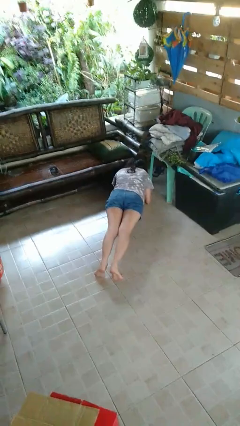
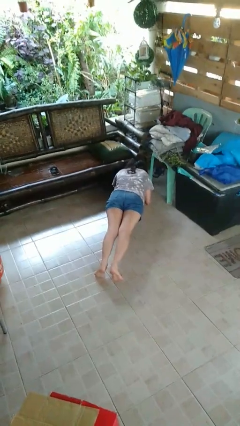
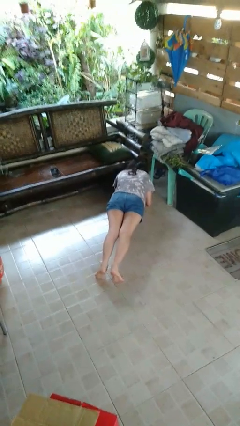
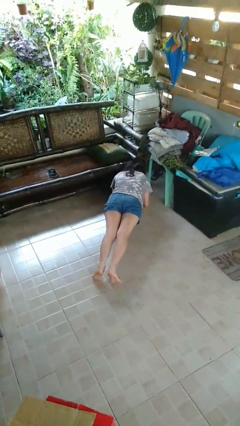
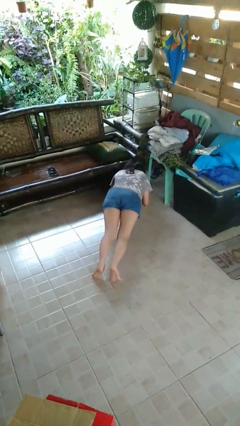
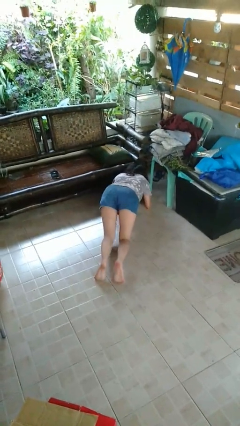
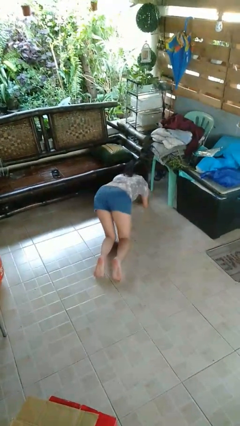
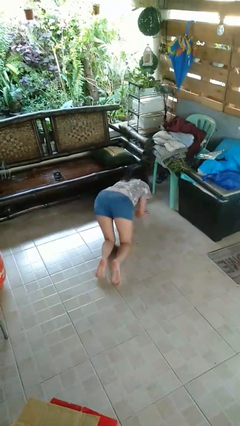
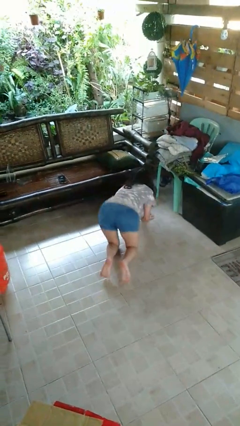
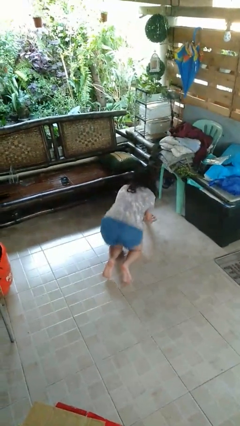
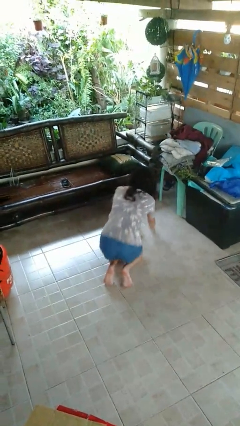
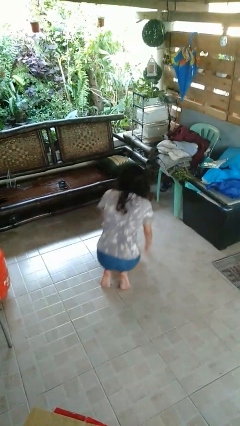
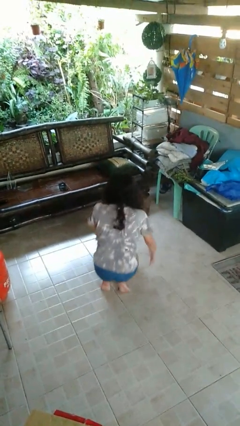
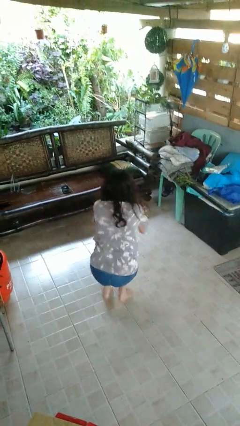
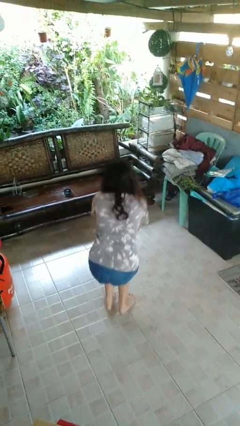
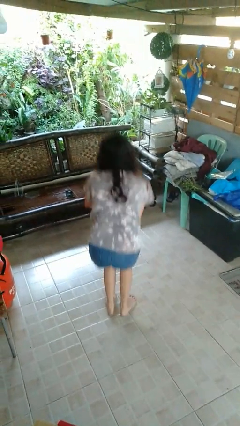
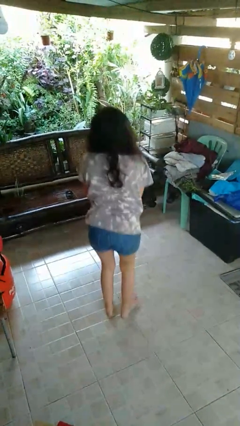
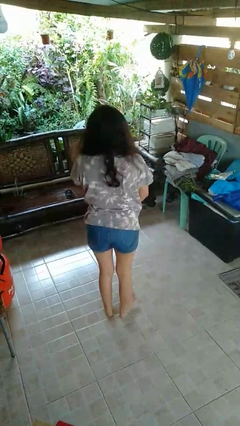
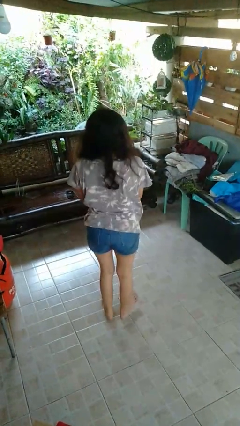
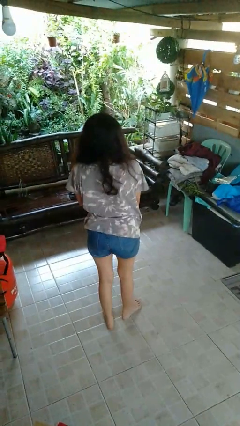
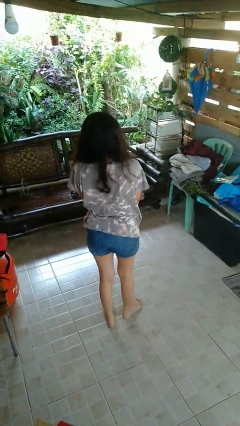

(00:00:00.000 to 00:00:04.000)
person stands up from floor

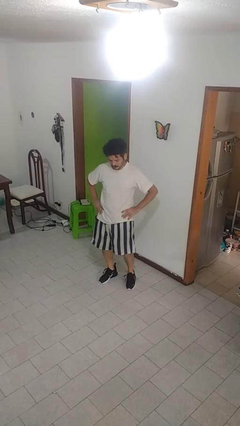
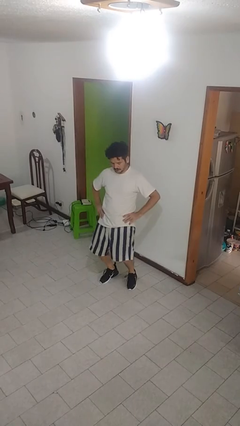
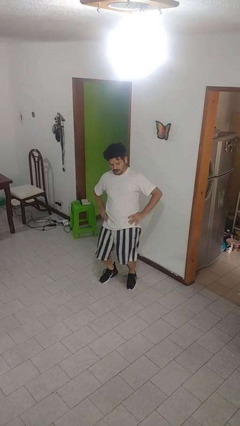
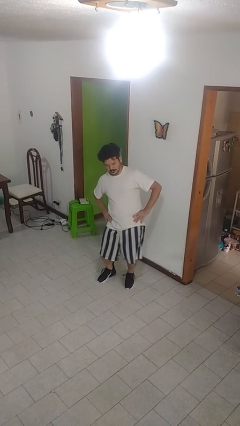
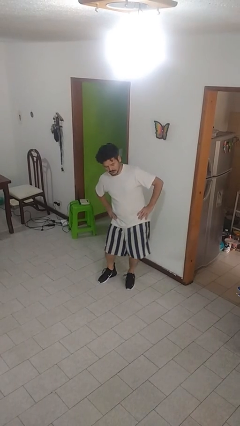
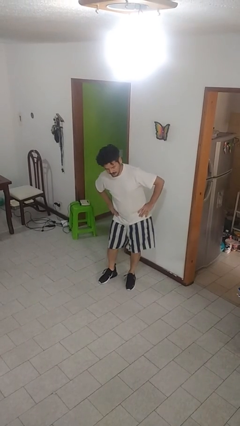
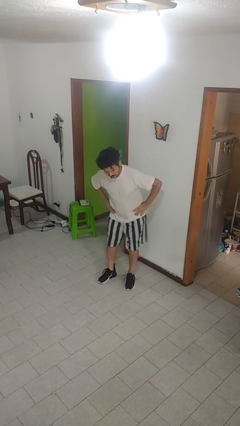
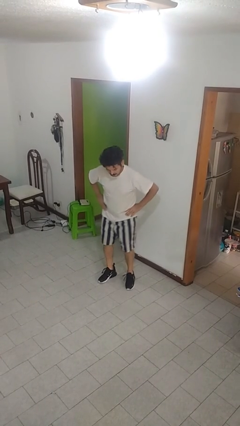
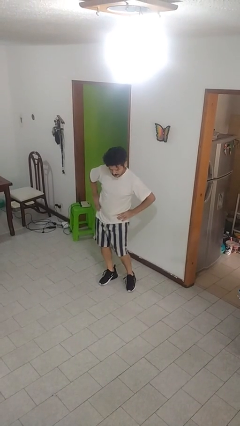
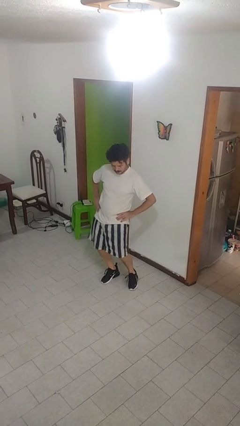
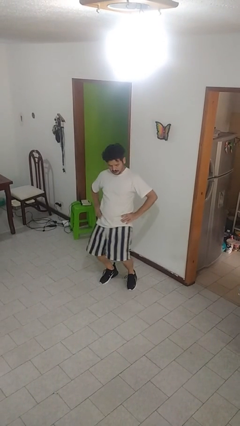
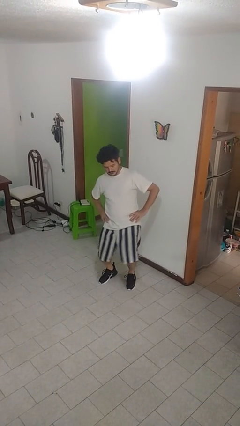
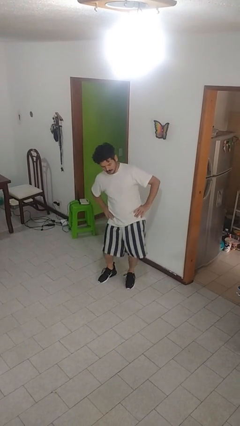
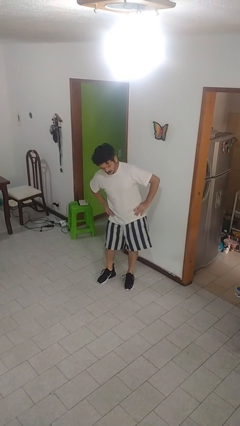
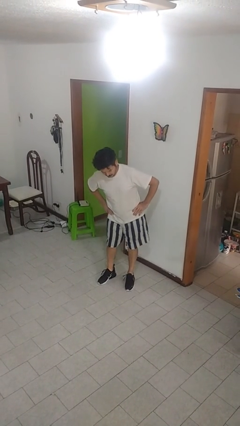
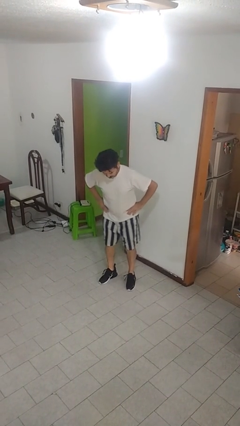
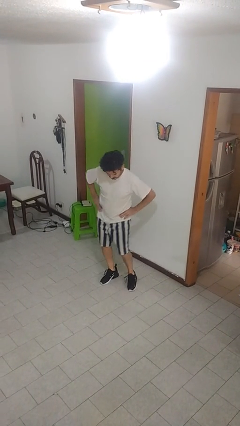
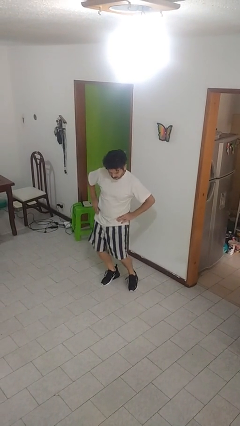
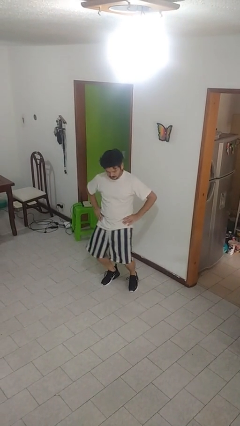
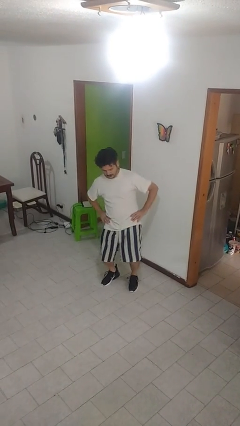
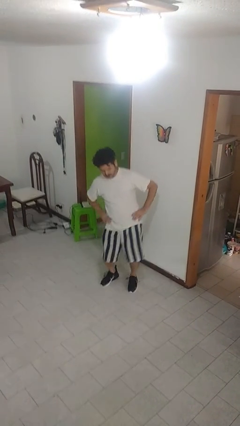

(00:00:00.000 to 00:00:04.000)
person wiggles hips

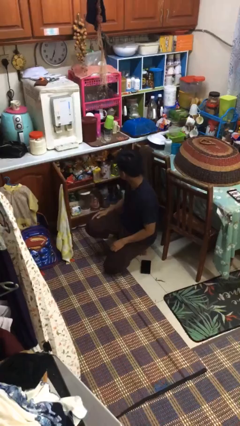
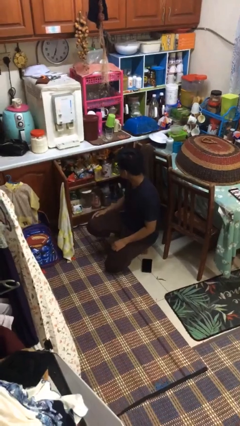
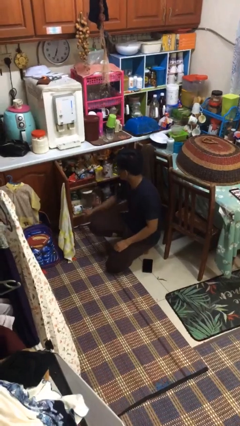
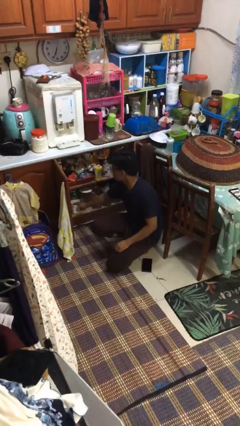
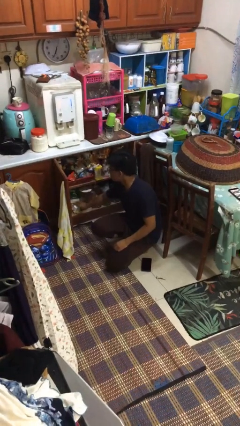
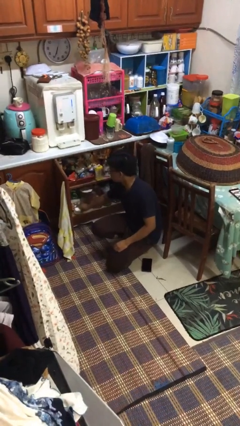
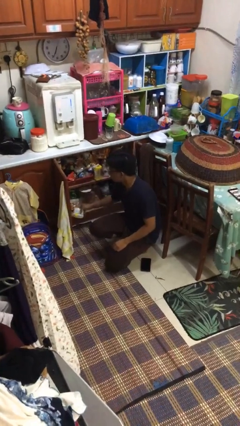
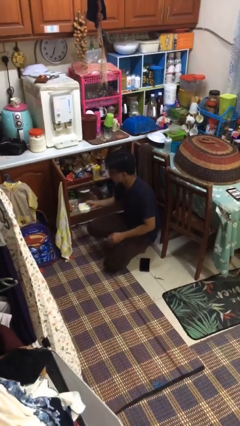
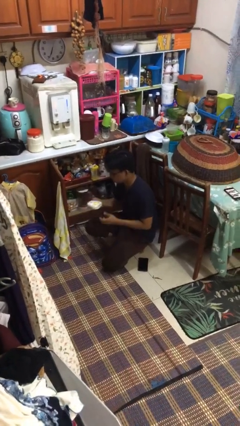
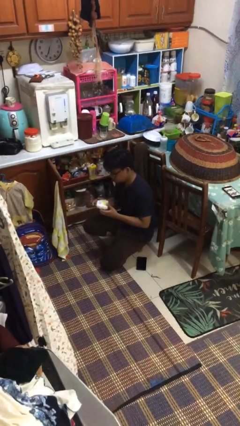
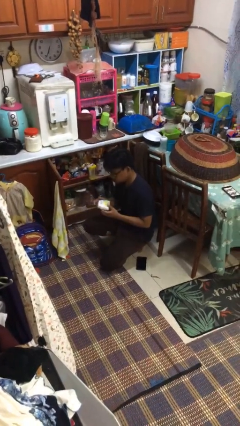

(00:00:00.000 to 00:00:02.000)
person takes object from cabinet

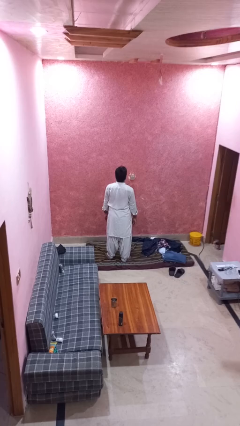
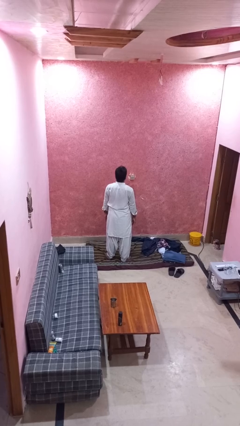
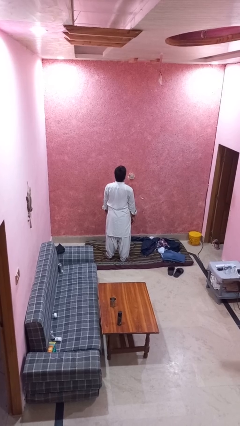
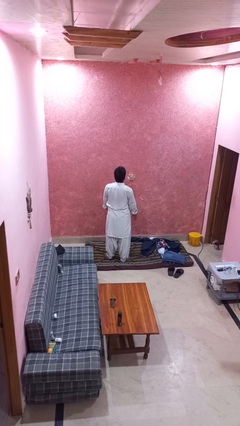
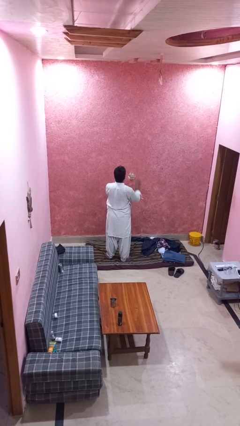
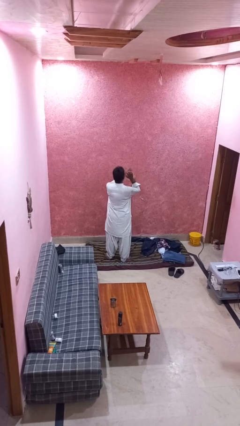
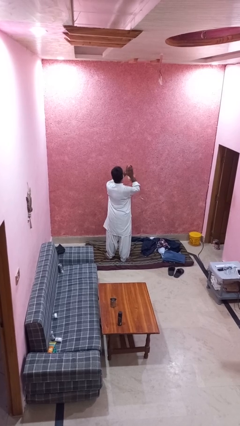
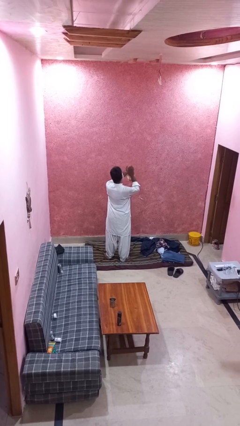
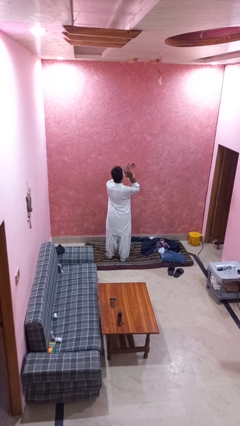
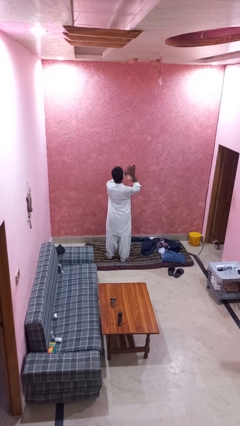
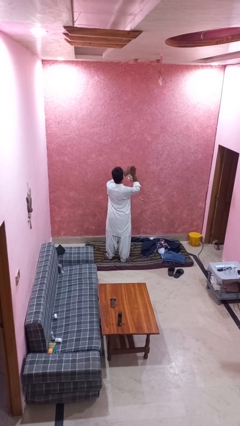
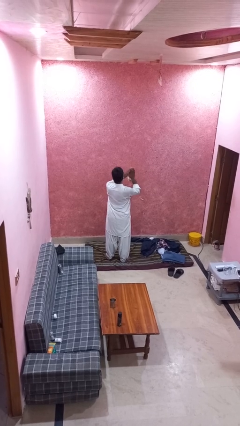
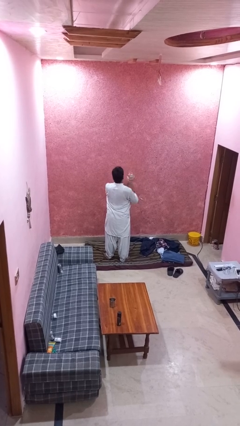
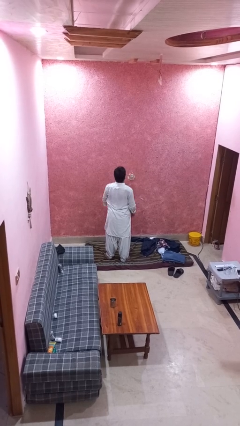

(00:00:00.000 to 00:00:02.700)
person claps hands

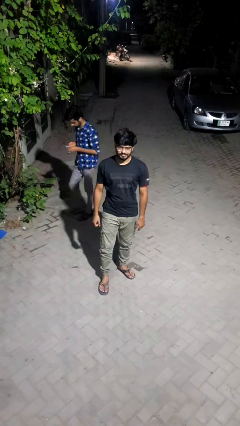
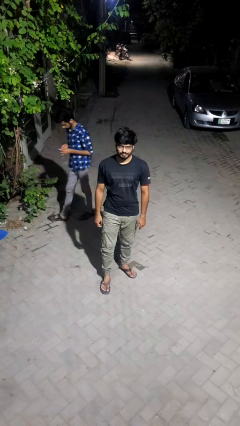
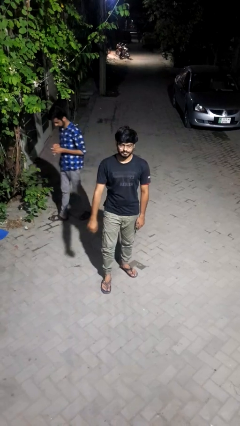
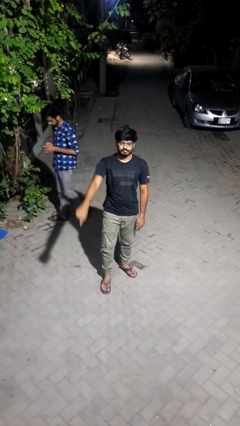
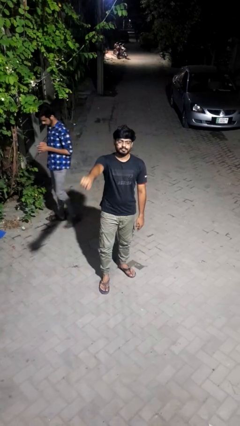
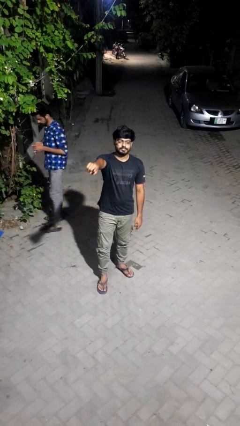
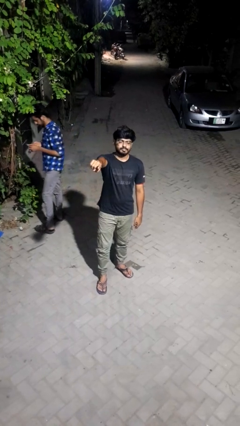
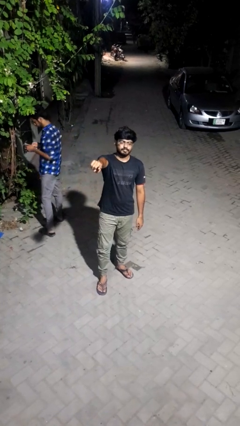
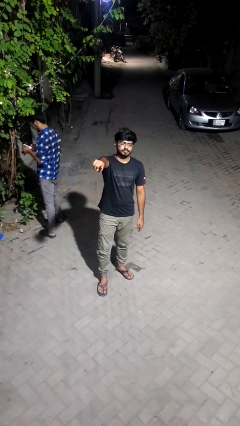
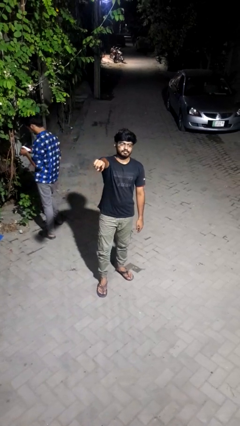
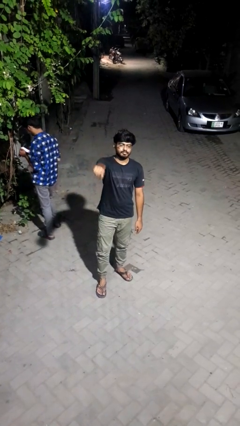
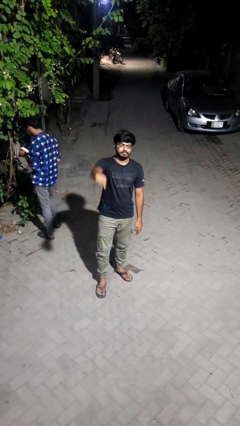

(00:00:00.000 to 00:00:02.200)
person points at person

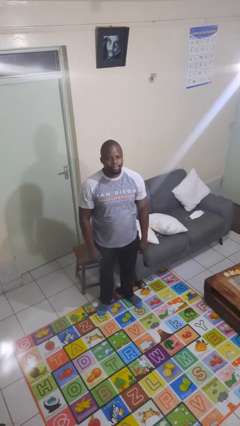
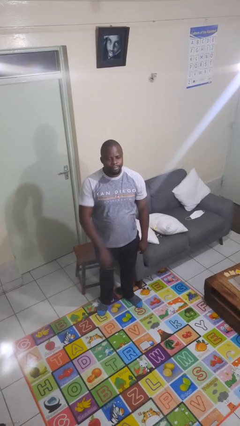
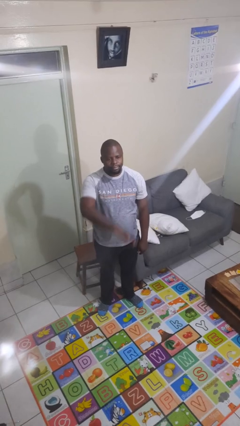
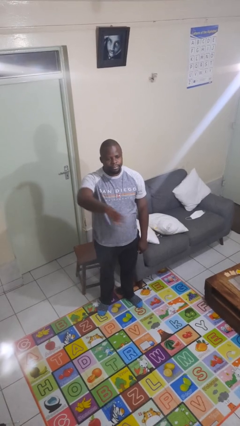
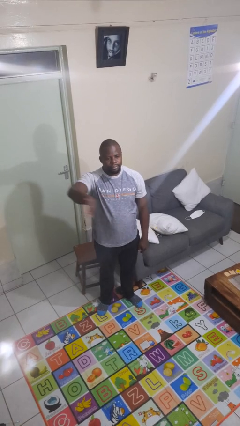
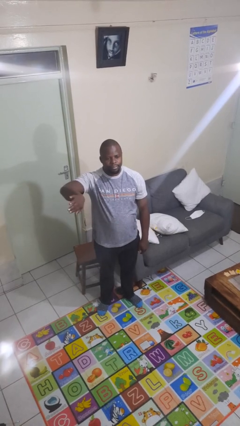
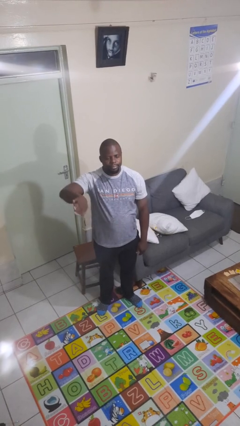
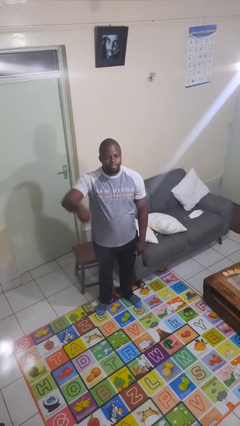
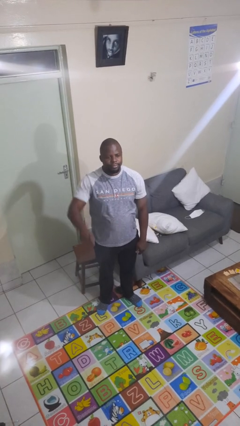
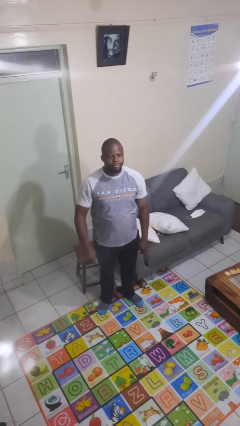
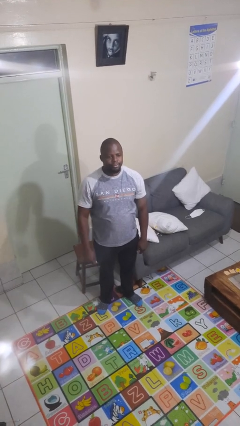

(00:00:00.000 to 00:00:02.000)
person gestures swipe right

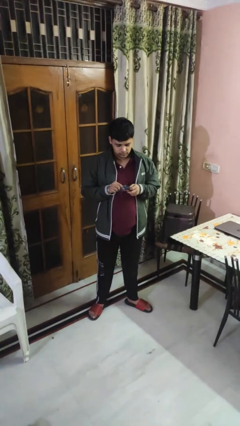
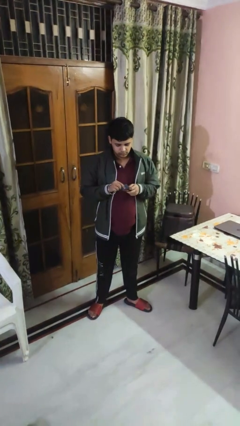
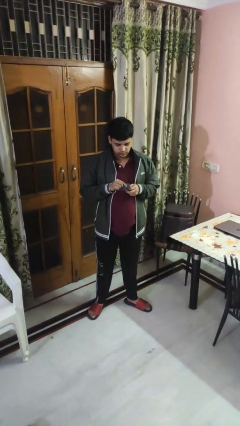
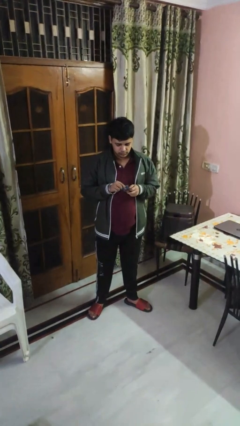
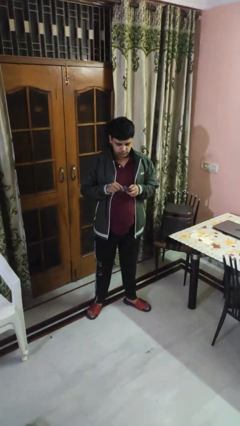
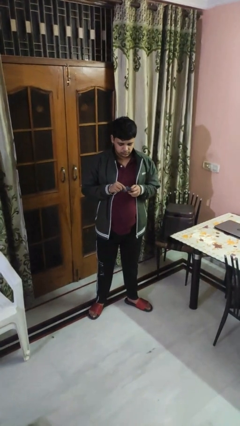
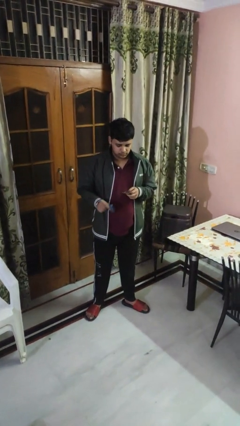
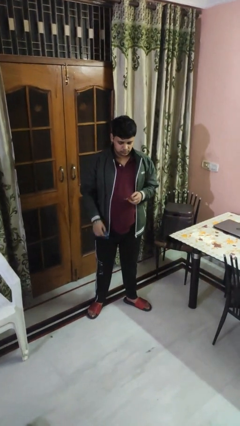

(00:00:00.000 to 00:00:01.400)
person cleans eyeglasses
